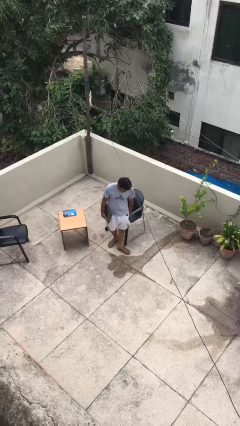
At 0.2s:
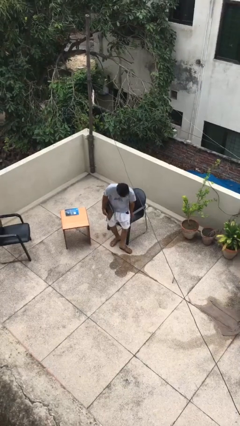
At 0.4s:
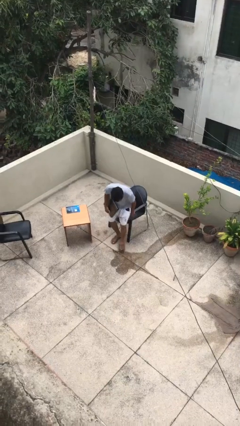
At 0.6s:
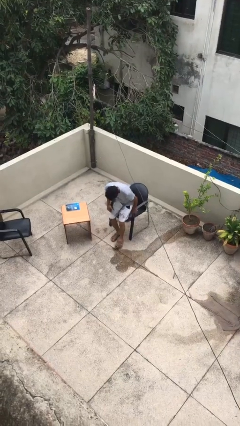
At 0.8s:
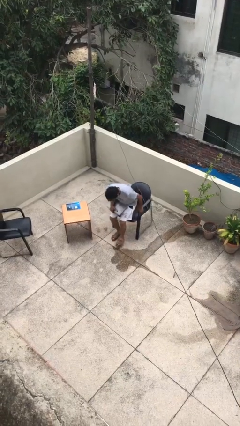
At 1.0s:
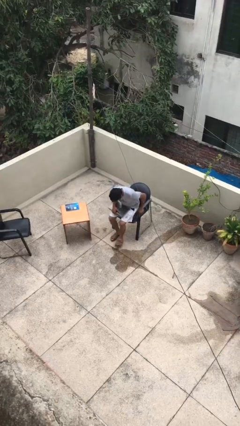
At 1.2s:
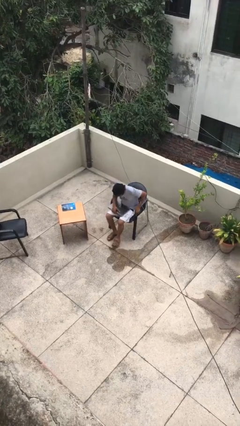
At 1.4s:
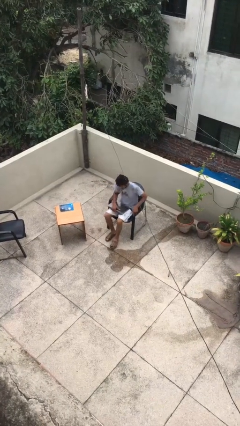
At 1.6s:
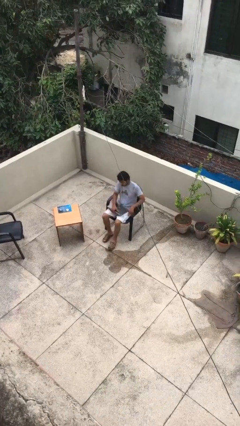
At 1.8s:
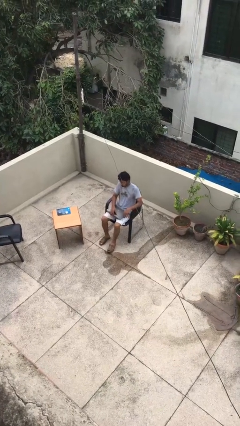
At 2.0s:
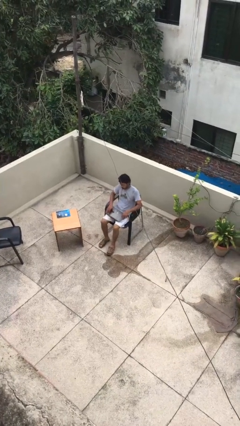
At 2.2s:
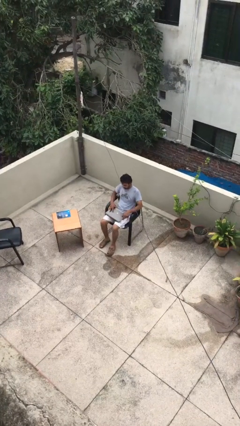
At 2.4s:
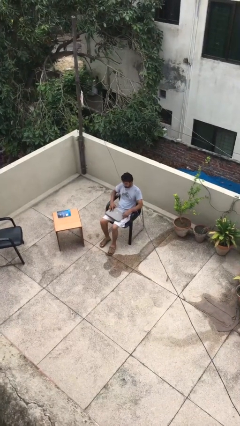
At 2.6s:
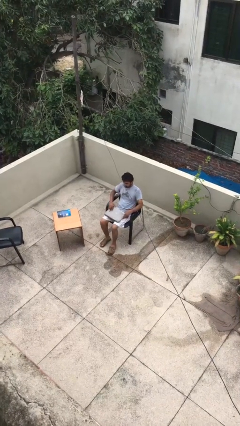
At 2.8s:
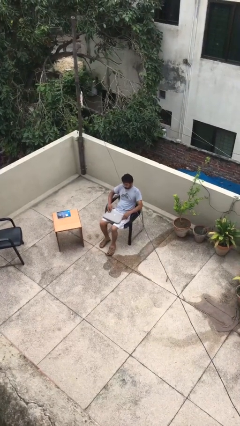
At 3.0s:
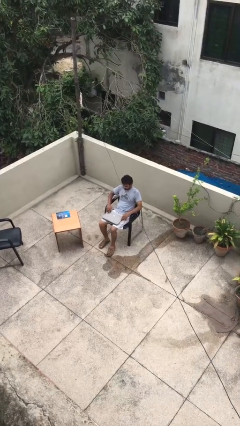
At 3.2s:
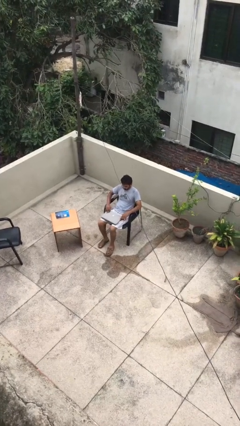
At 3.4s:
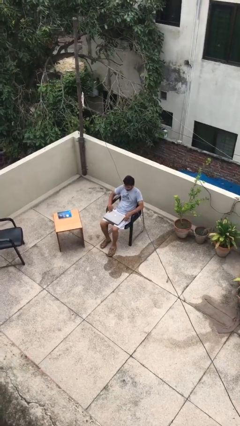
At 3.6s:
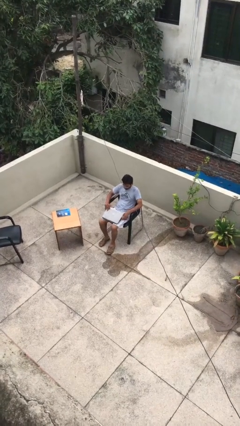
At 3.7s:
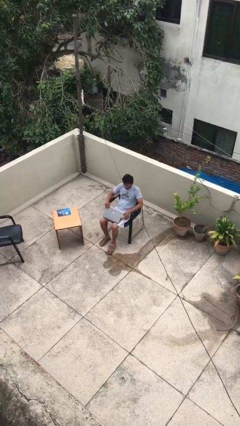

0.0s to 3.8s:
person sits down

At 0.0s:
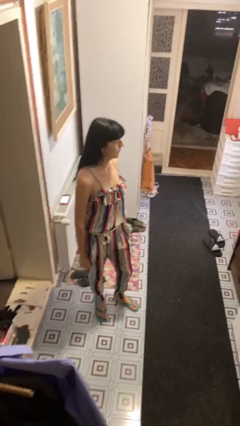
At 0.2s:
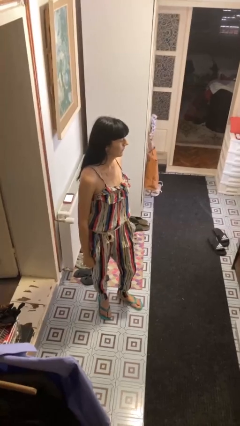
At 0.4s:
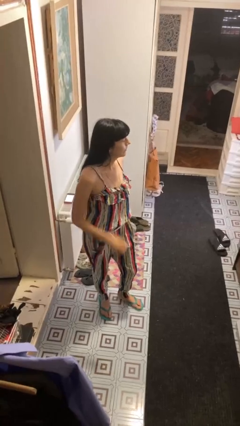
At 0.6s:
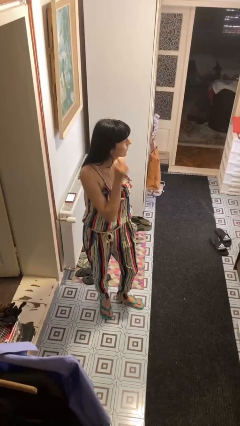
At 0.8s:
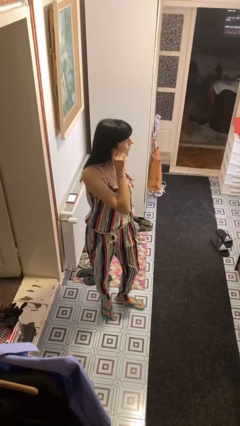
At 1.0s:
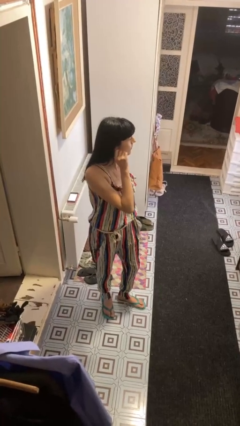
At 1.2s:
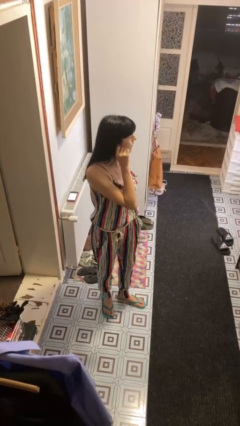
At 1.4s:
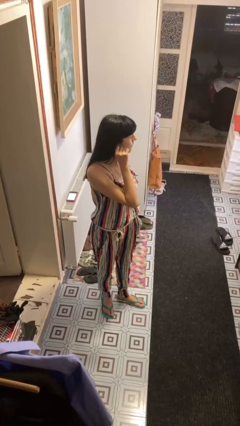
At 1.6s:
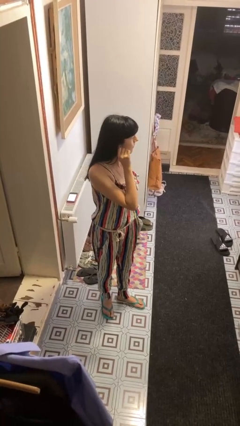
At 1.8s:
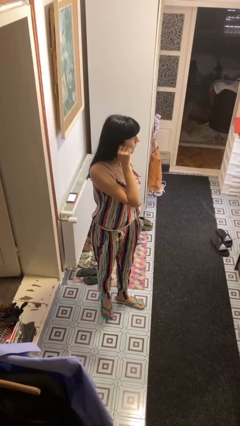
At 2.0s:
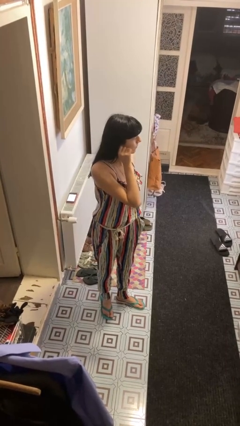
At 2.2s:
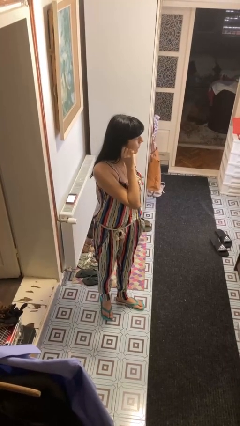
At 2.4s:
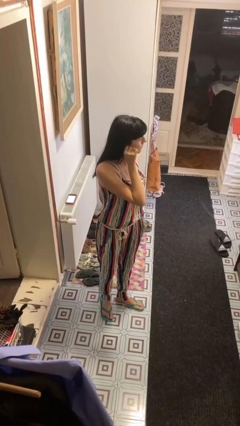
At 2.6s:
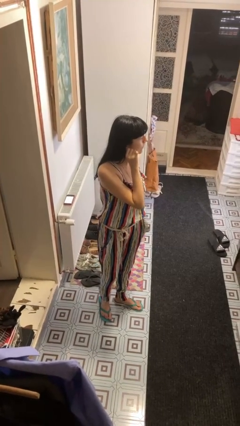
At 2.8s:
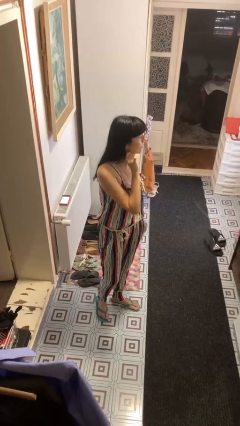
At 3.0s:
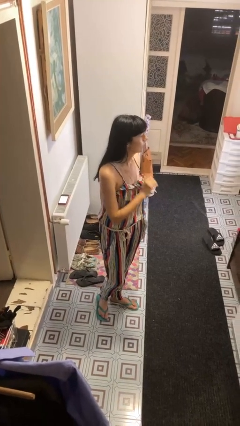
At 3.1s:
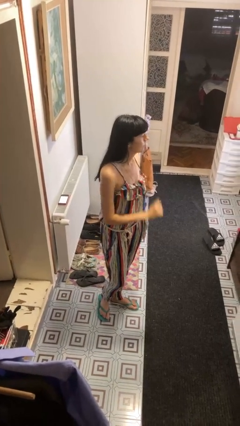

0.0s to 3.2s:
person touches earlobe

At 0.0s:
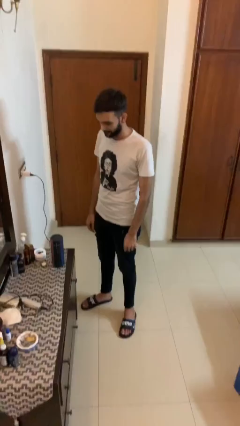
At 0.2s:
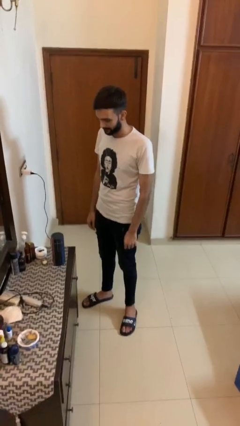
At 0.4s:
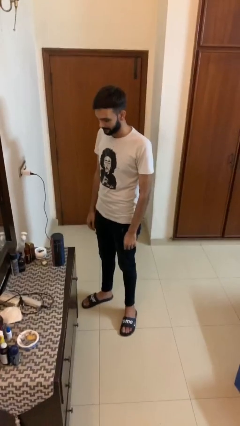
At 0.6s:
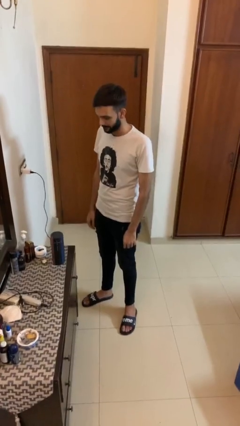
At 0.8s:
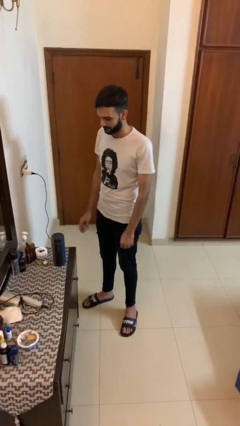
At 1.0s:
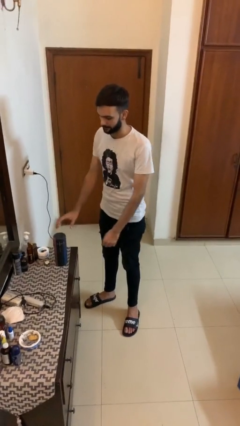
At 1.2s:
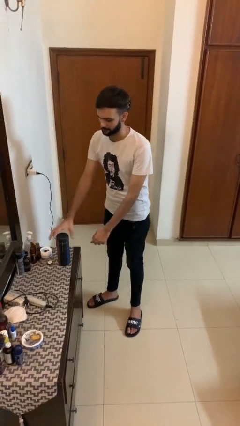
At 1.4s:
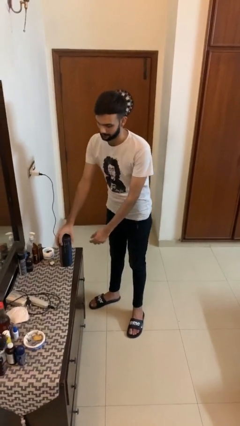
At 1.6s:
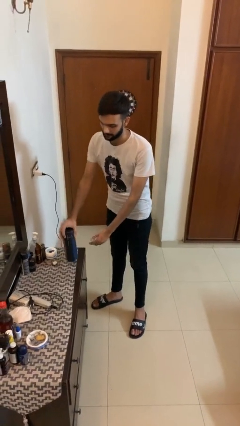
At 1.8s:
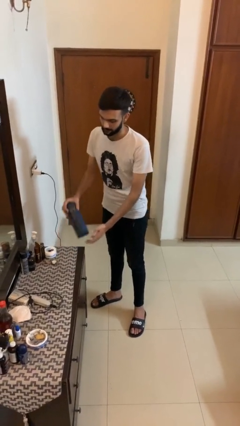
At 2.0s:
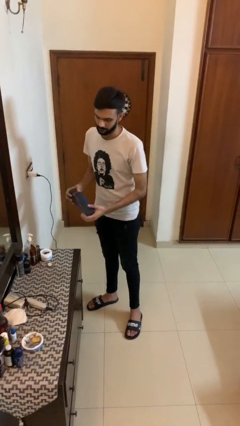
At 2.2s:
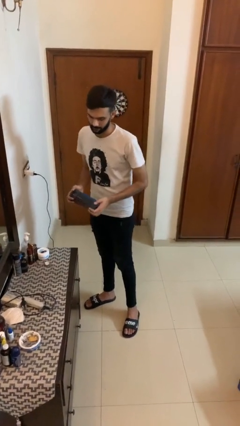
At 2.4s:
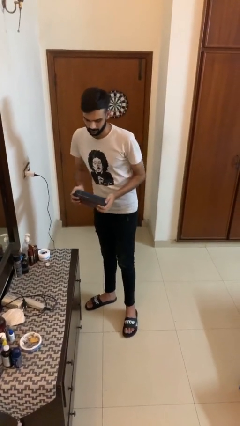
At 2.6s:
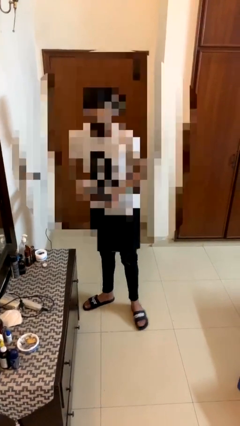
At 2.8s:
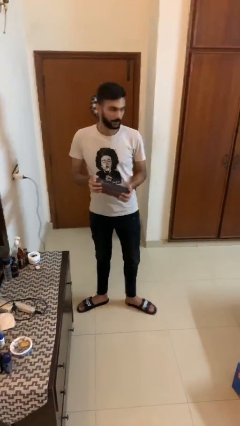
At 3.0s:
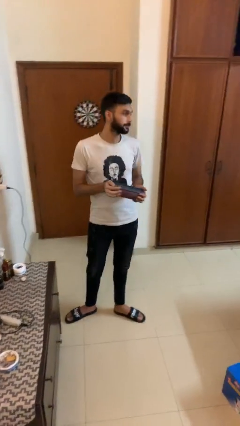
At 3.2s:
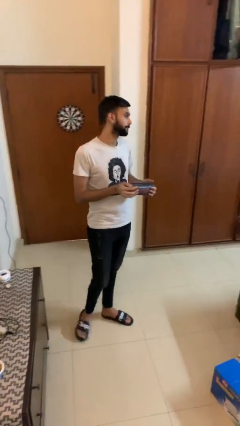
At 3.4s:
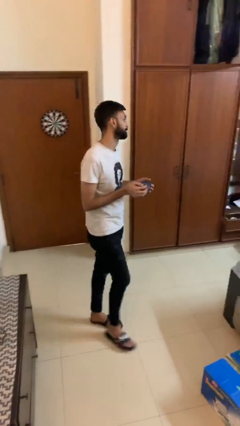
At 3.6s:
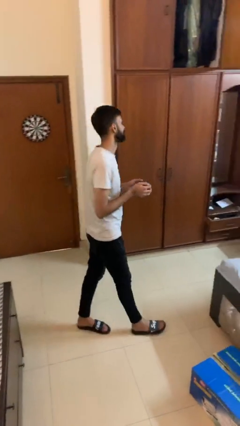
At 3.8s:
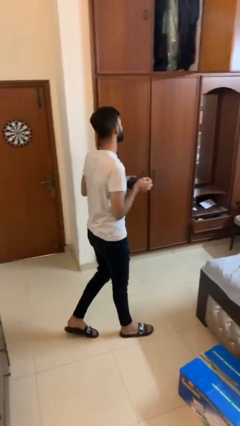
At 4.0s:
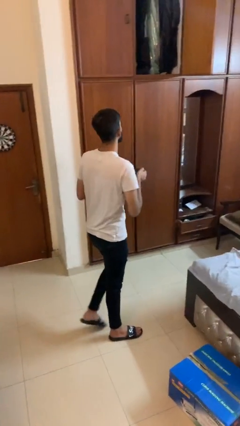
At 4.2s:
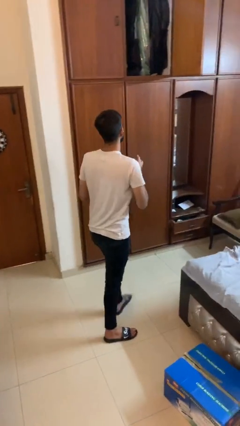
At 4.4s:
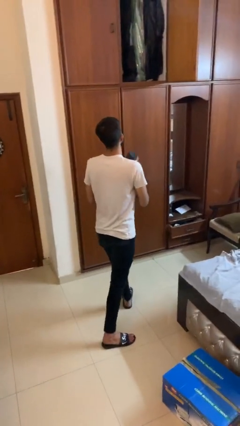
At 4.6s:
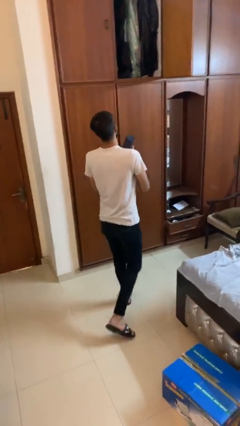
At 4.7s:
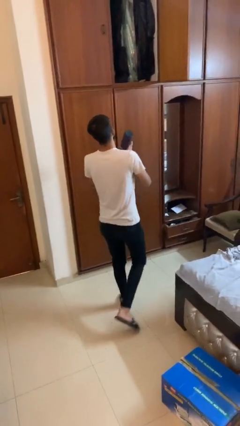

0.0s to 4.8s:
person picks up object from table

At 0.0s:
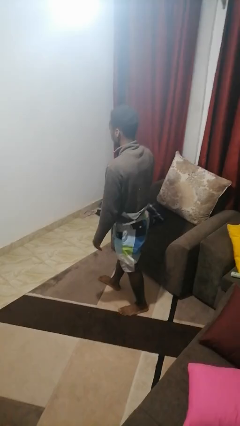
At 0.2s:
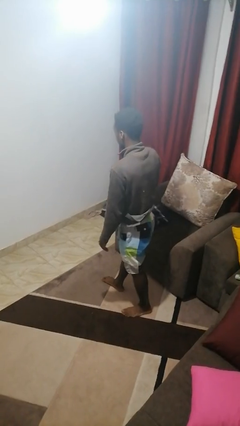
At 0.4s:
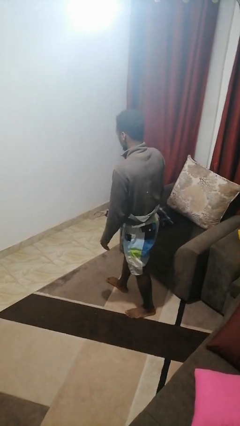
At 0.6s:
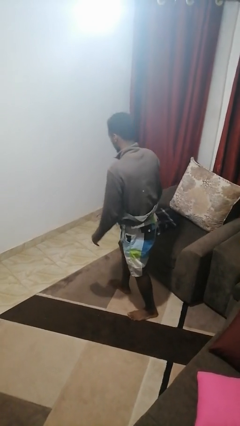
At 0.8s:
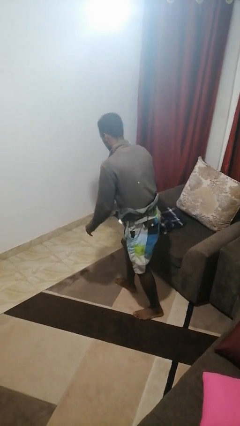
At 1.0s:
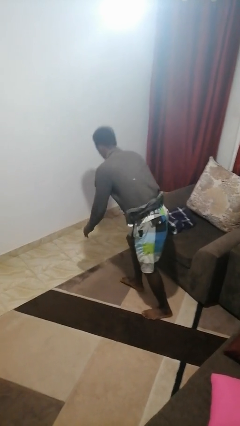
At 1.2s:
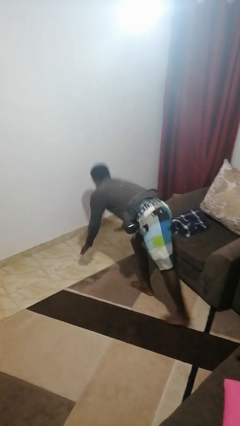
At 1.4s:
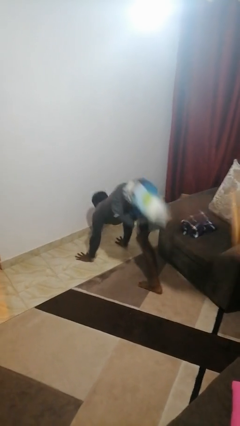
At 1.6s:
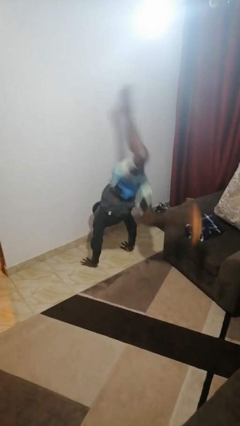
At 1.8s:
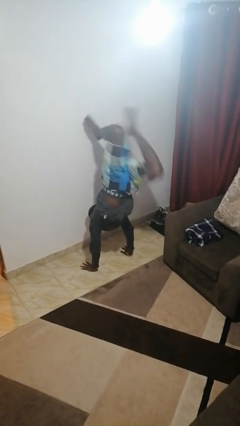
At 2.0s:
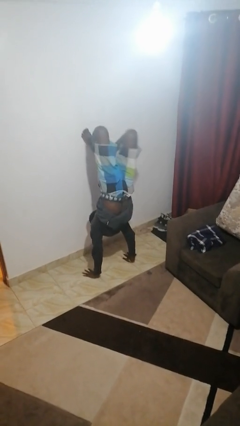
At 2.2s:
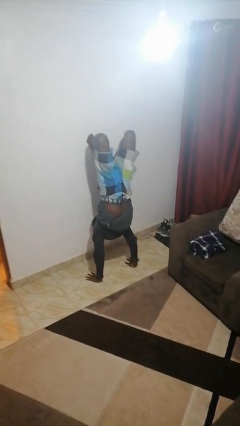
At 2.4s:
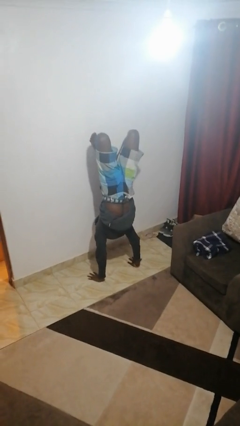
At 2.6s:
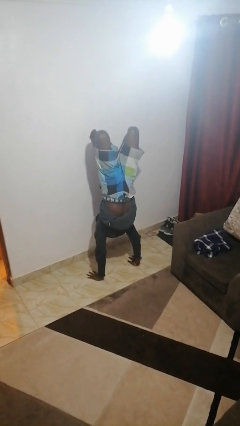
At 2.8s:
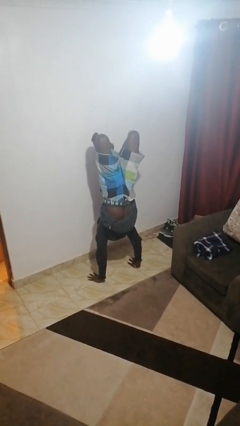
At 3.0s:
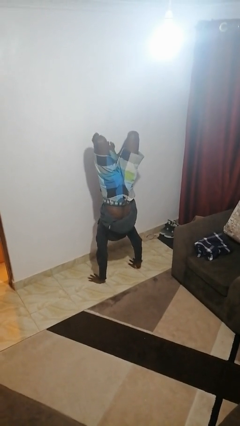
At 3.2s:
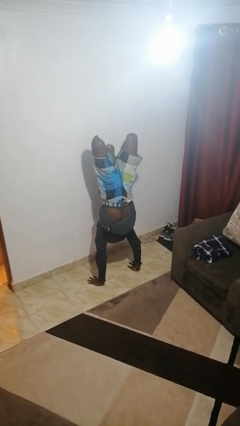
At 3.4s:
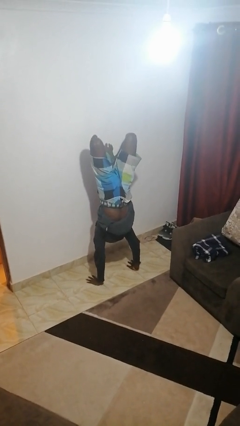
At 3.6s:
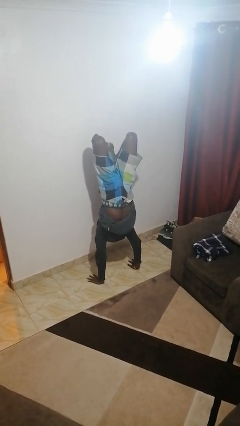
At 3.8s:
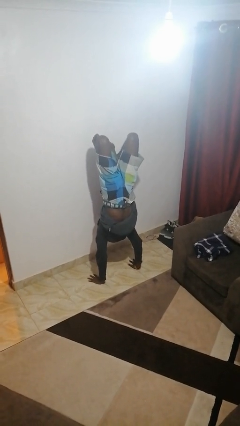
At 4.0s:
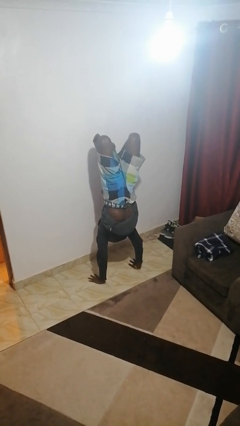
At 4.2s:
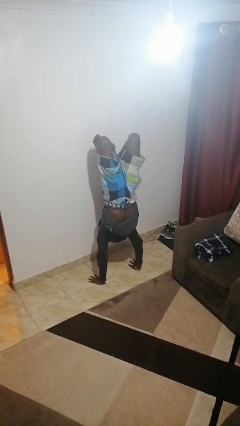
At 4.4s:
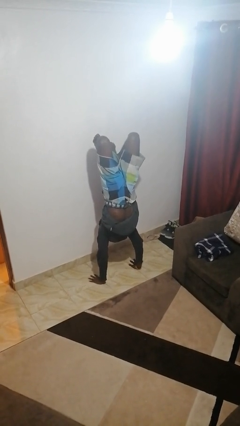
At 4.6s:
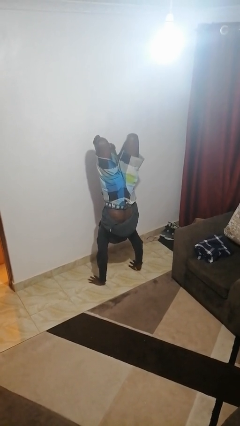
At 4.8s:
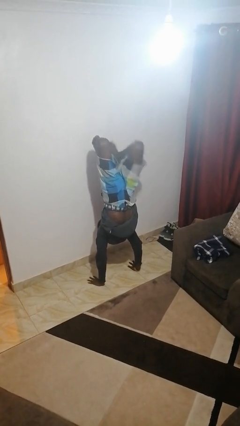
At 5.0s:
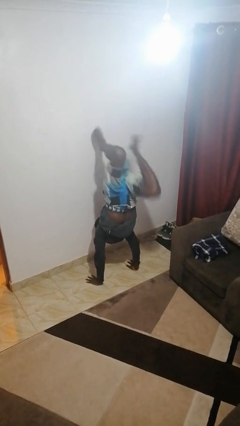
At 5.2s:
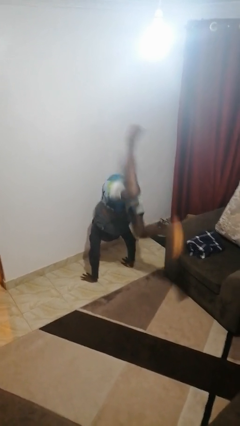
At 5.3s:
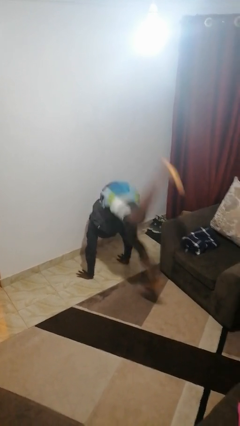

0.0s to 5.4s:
person handstand

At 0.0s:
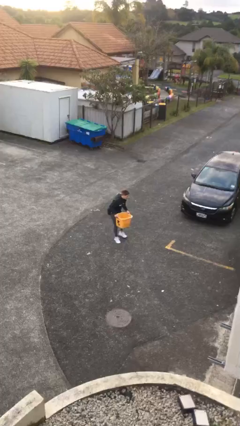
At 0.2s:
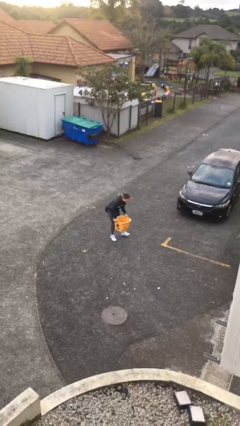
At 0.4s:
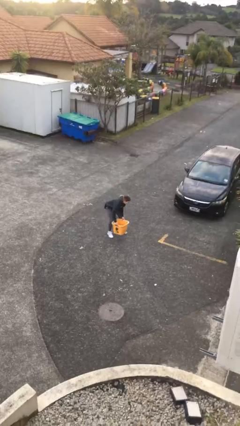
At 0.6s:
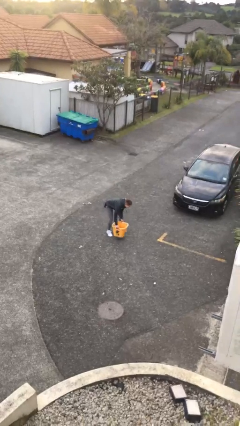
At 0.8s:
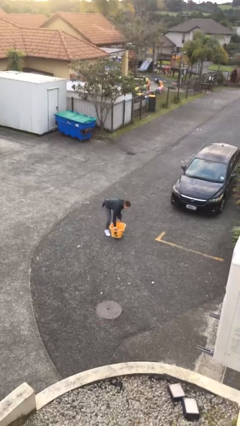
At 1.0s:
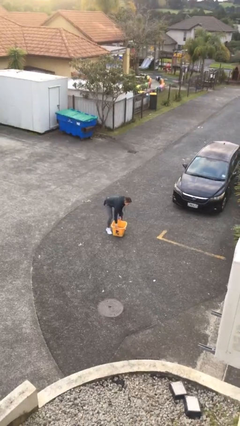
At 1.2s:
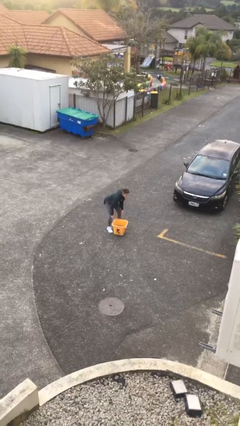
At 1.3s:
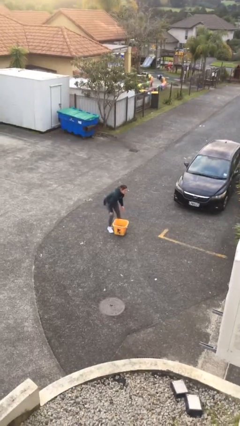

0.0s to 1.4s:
person puts down object on floor
